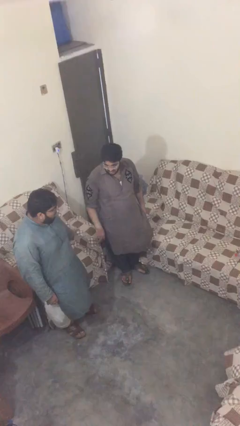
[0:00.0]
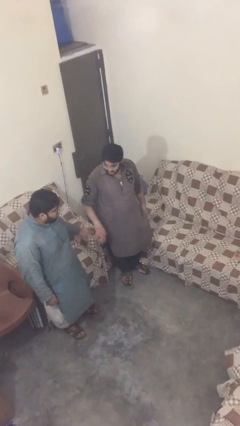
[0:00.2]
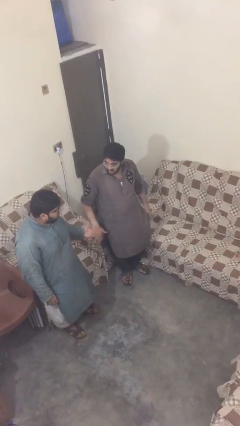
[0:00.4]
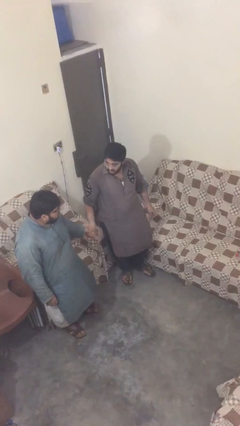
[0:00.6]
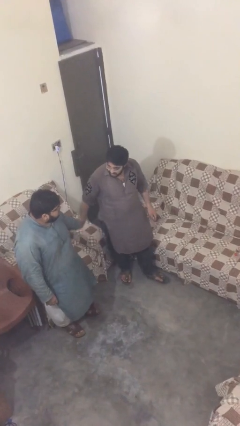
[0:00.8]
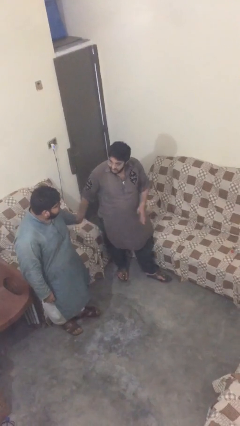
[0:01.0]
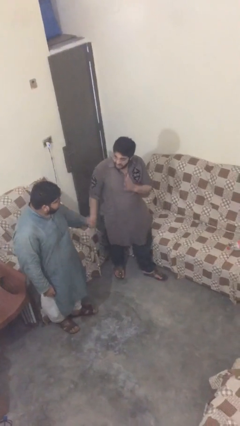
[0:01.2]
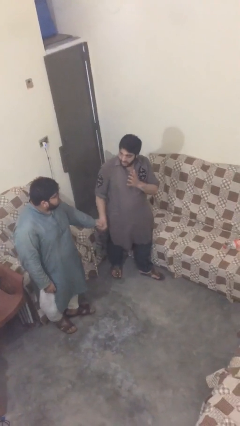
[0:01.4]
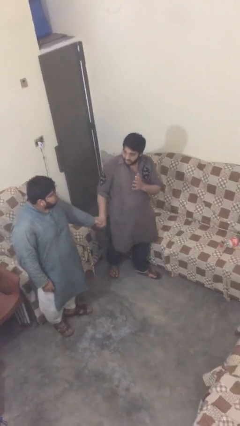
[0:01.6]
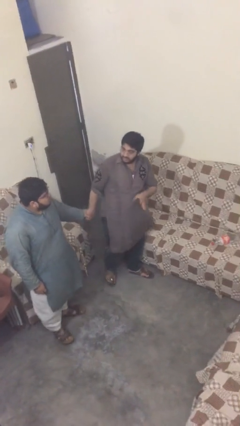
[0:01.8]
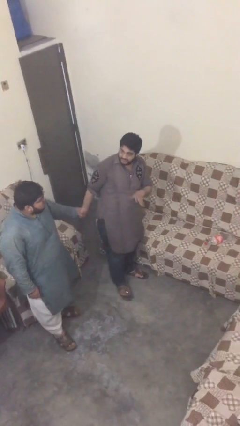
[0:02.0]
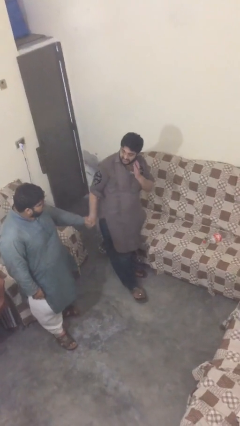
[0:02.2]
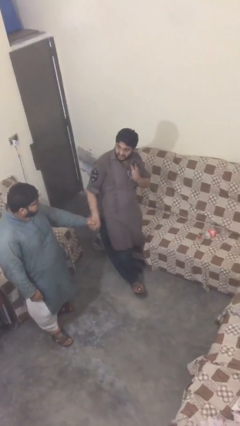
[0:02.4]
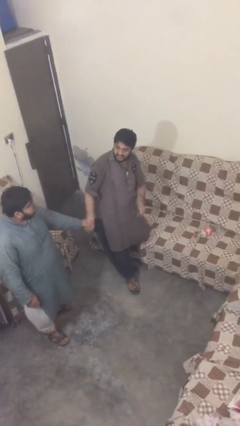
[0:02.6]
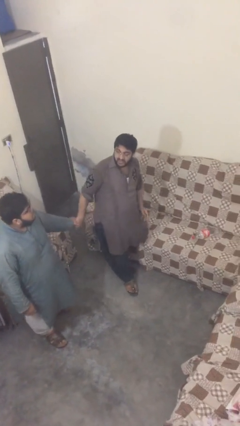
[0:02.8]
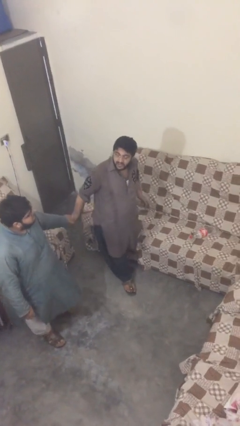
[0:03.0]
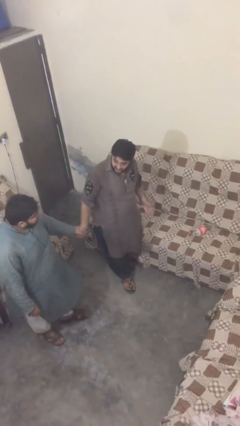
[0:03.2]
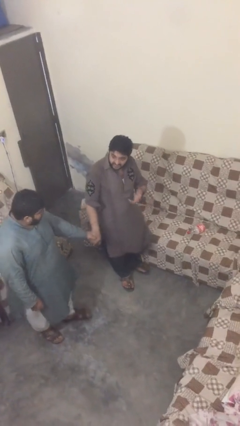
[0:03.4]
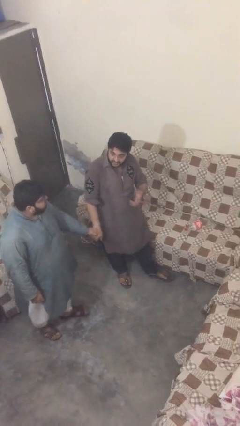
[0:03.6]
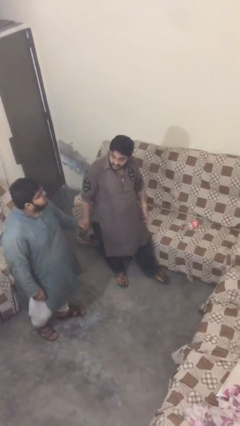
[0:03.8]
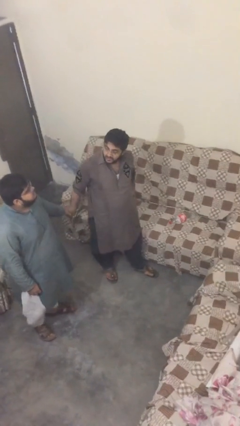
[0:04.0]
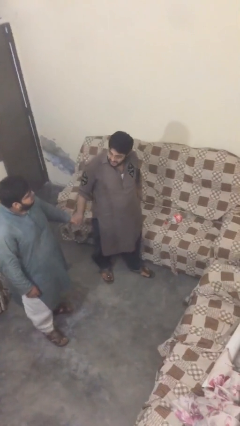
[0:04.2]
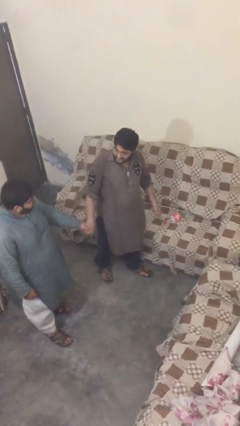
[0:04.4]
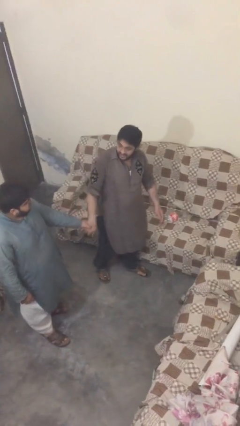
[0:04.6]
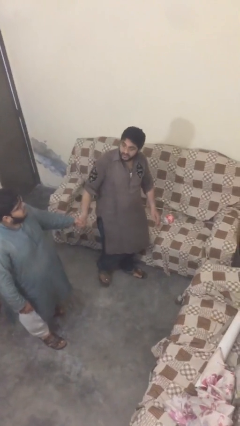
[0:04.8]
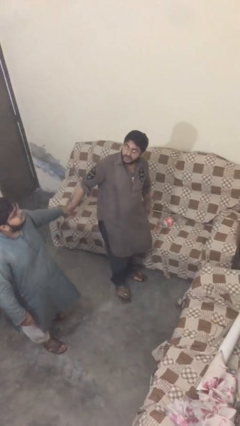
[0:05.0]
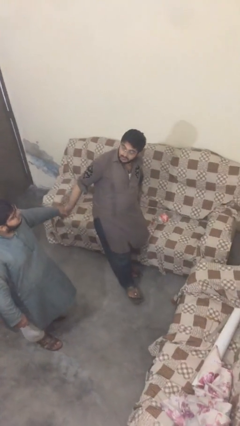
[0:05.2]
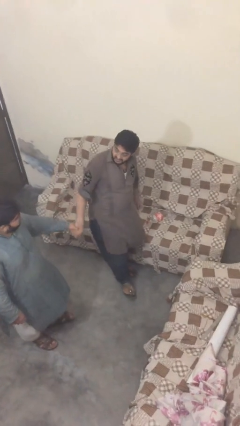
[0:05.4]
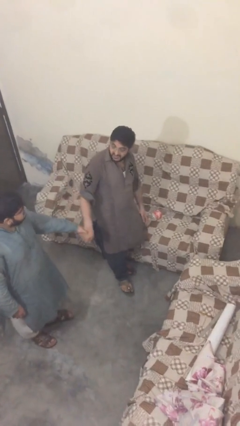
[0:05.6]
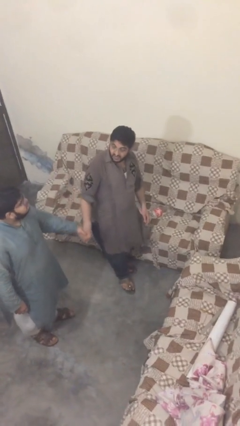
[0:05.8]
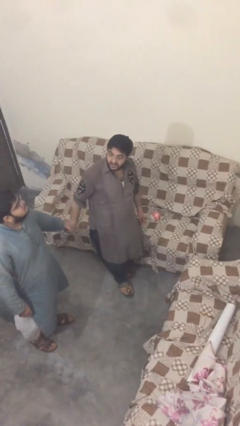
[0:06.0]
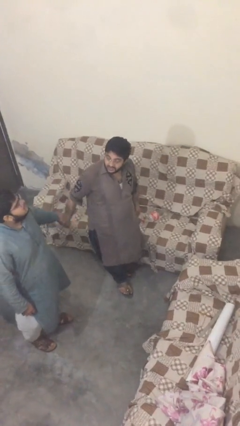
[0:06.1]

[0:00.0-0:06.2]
person holds hand

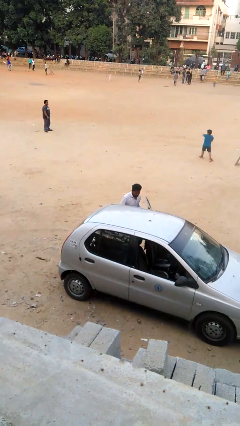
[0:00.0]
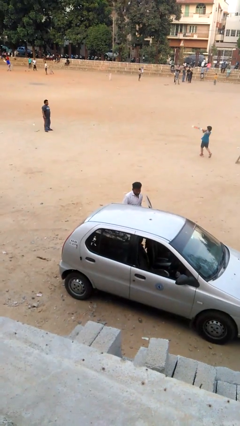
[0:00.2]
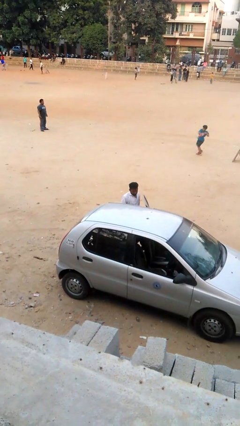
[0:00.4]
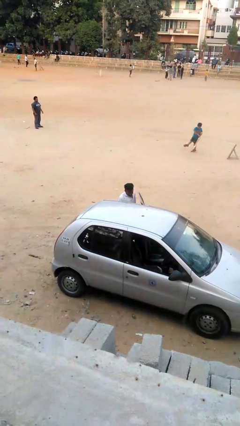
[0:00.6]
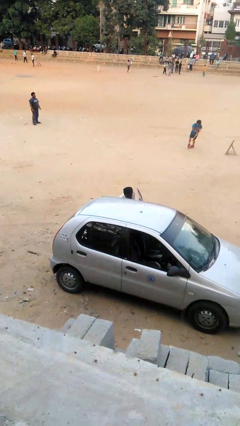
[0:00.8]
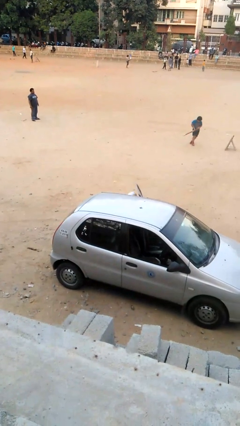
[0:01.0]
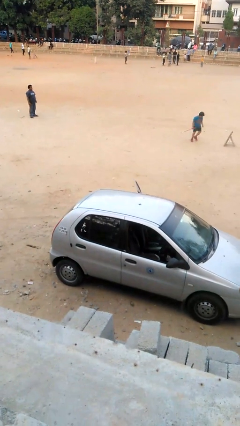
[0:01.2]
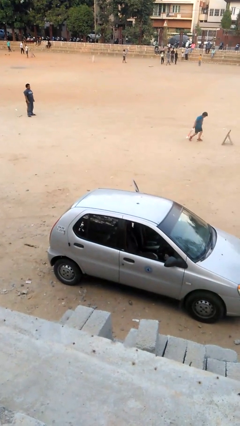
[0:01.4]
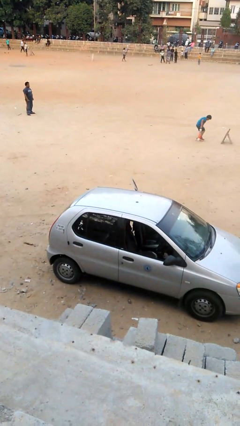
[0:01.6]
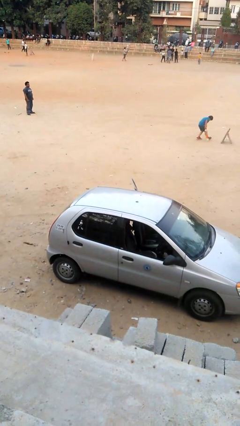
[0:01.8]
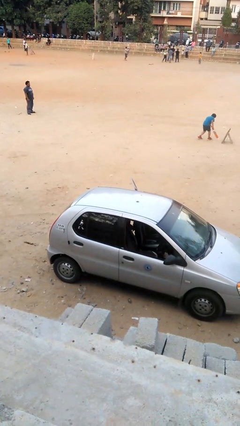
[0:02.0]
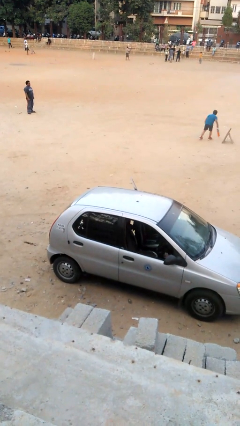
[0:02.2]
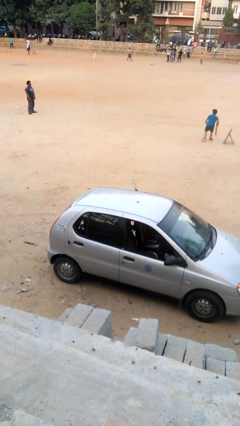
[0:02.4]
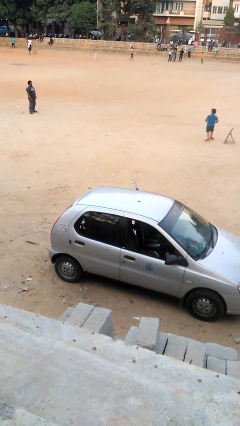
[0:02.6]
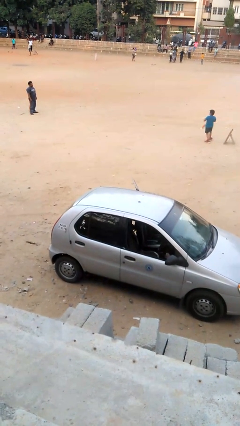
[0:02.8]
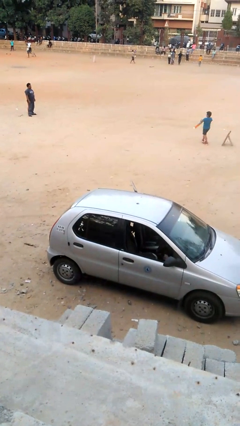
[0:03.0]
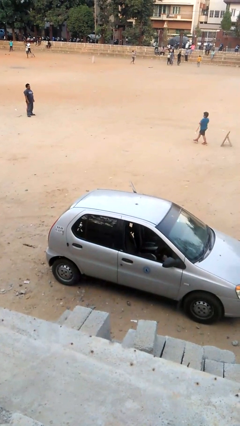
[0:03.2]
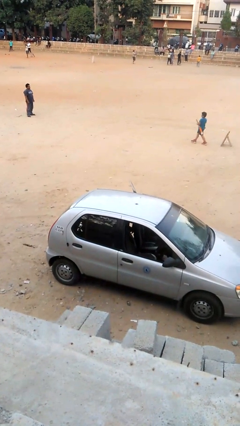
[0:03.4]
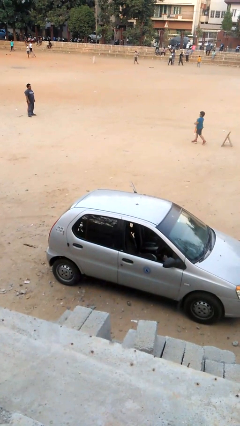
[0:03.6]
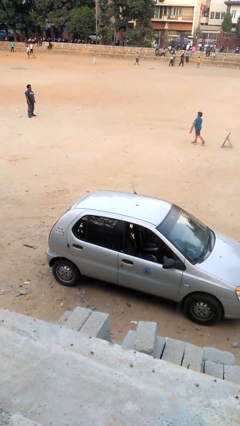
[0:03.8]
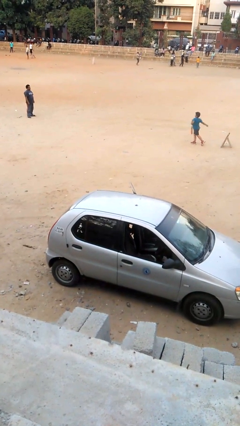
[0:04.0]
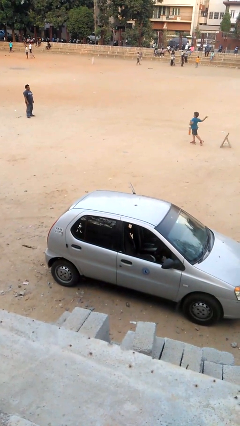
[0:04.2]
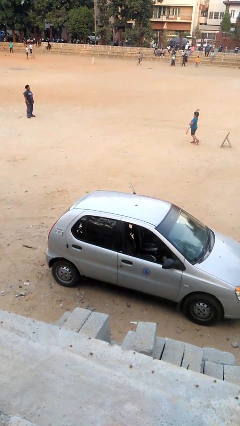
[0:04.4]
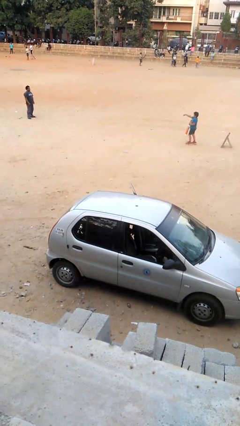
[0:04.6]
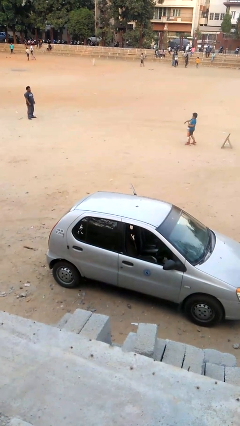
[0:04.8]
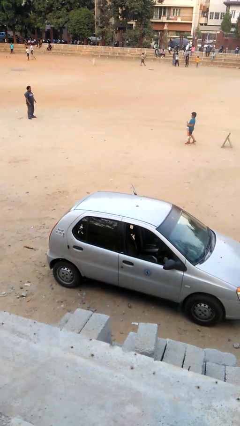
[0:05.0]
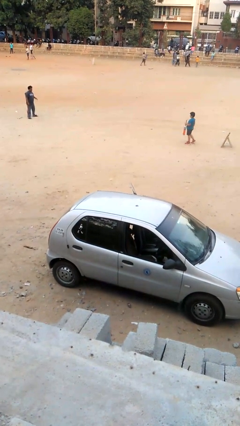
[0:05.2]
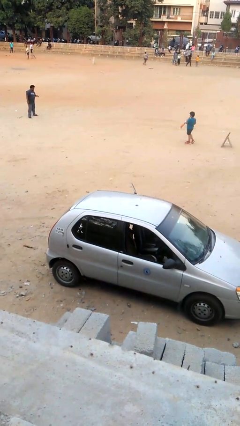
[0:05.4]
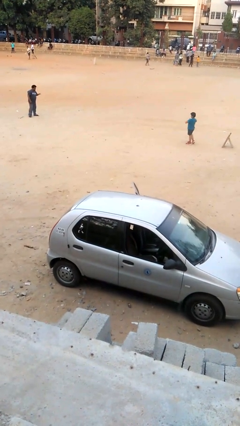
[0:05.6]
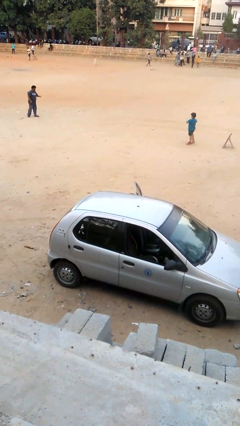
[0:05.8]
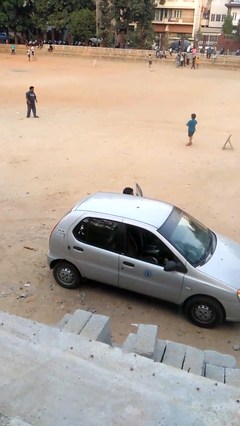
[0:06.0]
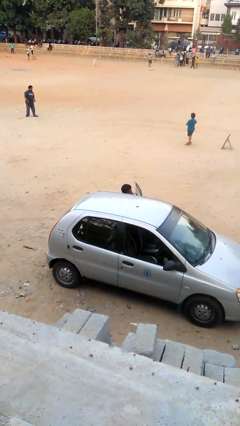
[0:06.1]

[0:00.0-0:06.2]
person enters car

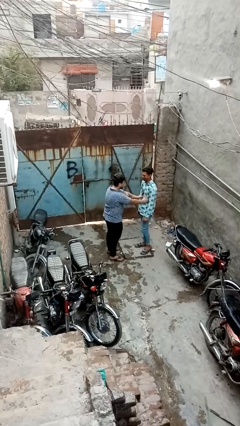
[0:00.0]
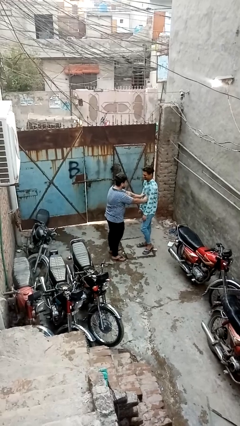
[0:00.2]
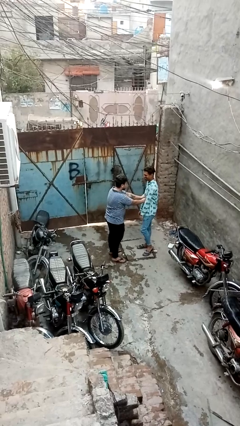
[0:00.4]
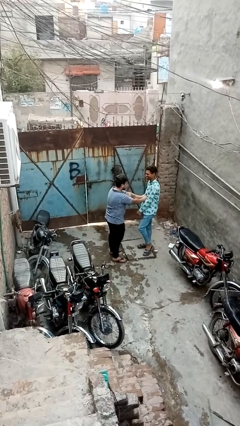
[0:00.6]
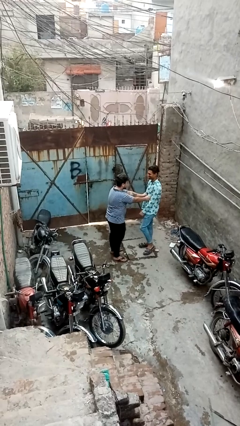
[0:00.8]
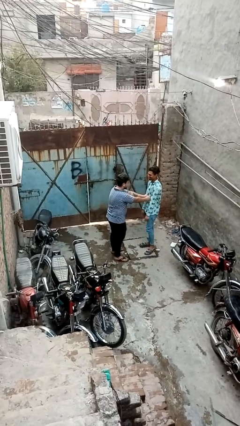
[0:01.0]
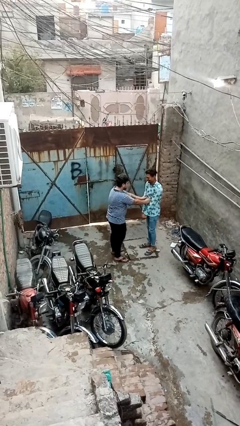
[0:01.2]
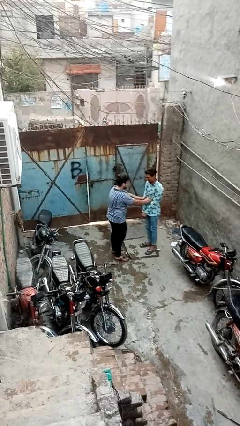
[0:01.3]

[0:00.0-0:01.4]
person tickles person

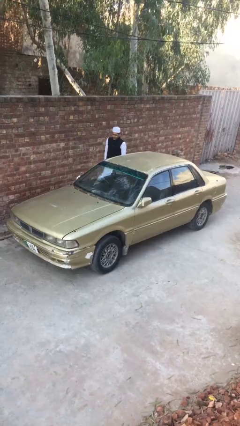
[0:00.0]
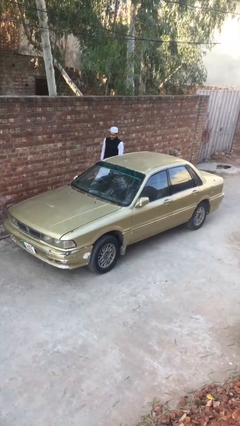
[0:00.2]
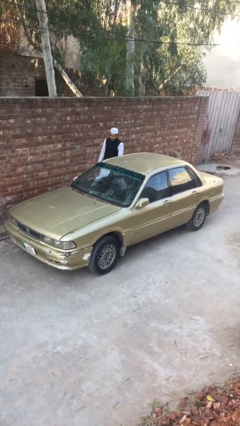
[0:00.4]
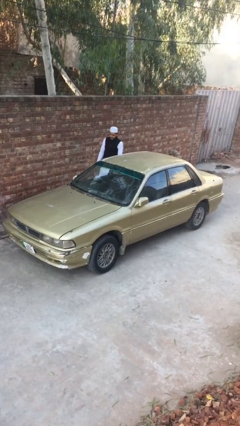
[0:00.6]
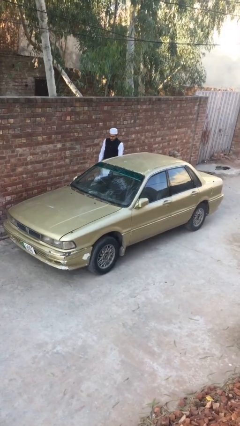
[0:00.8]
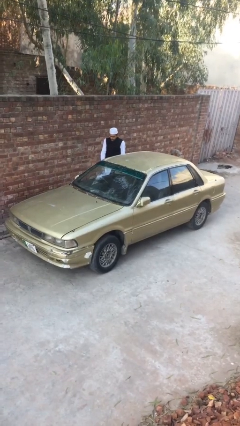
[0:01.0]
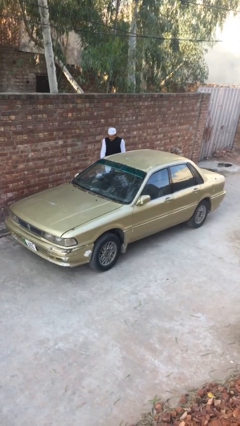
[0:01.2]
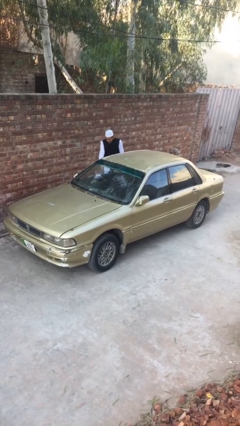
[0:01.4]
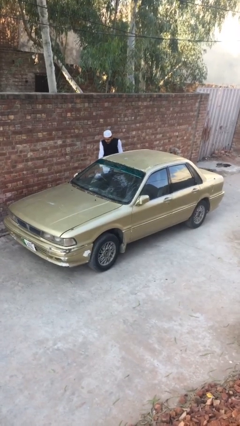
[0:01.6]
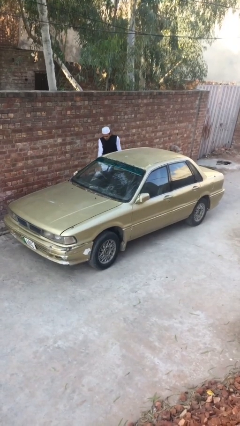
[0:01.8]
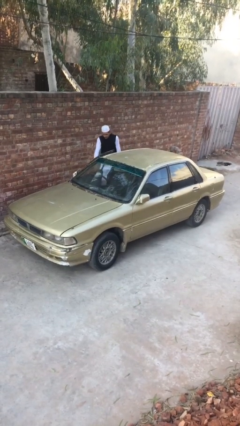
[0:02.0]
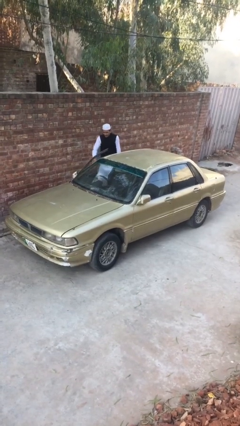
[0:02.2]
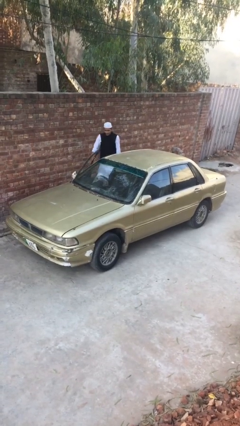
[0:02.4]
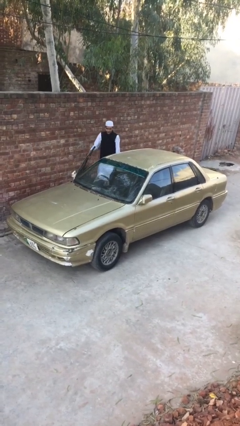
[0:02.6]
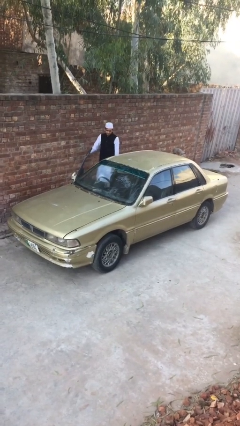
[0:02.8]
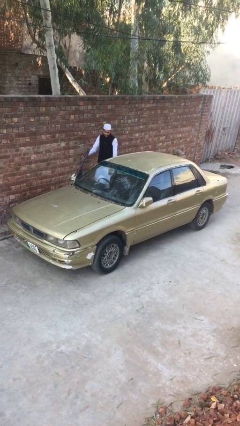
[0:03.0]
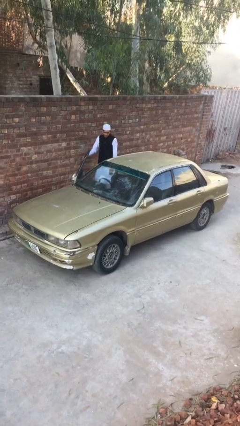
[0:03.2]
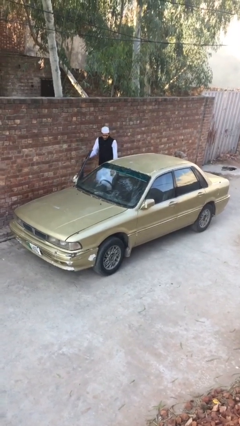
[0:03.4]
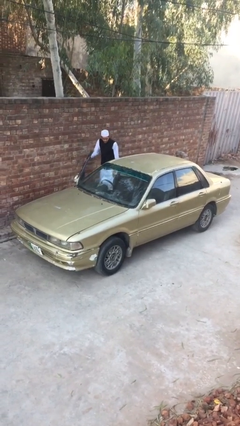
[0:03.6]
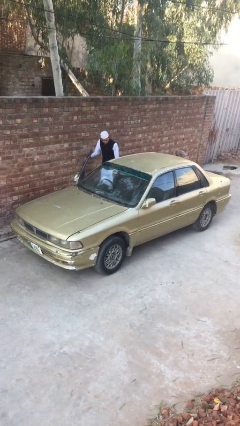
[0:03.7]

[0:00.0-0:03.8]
person opens car door

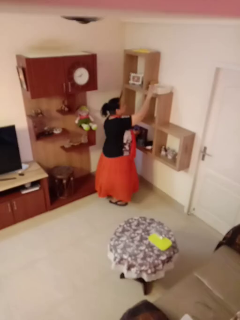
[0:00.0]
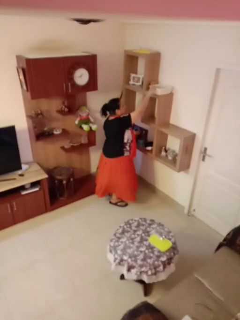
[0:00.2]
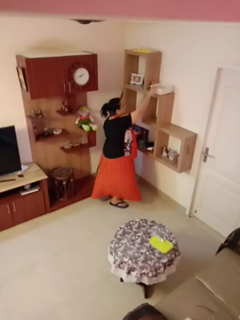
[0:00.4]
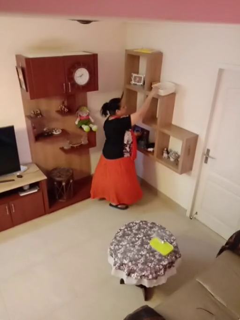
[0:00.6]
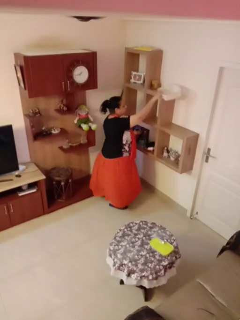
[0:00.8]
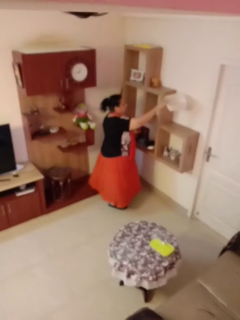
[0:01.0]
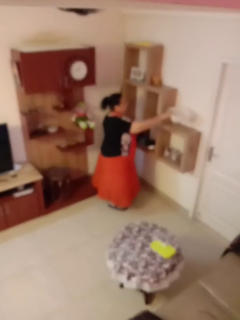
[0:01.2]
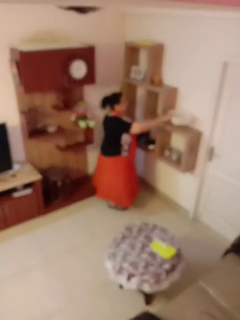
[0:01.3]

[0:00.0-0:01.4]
person picks up object from shelf
